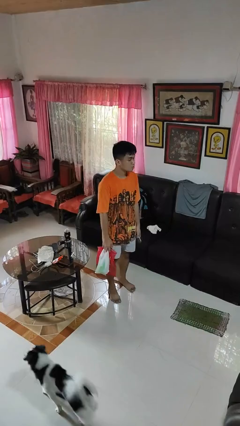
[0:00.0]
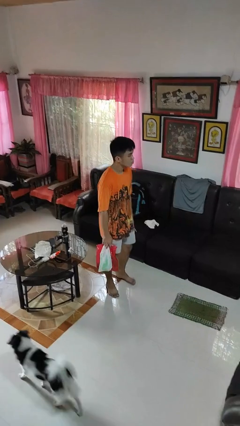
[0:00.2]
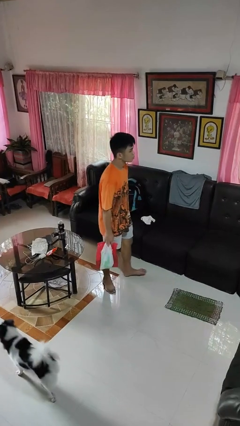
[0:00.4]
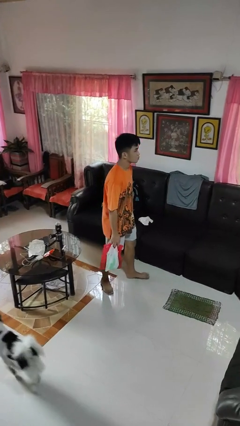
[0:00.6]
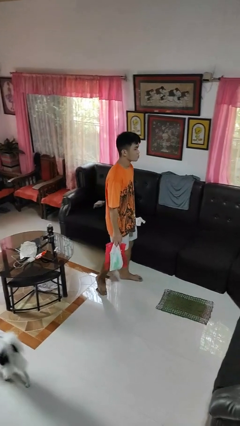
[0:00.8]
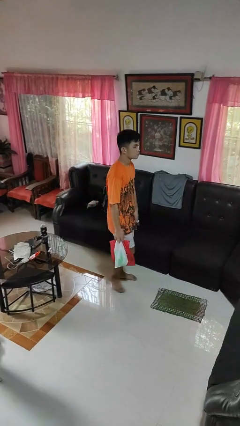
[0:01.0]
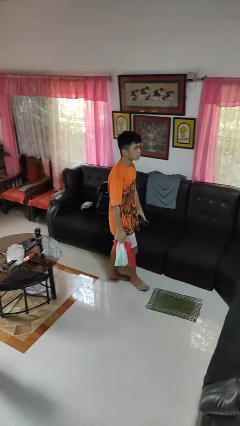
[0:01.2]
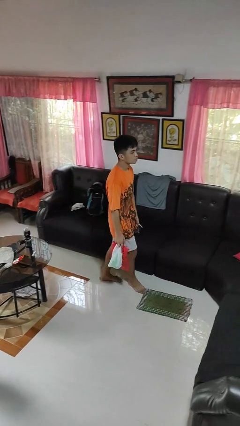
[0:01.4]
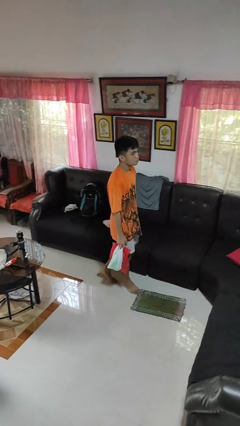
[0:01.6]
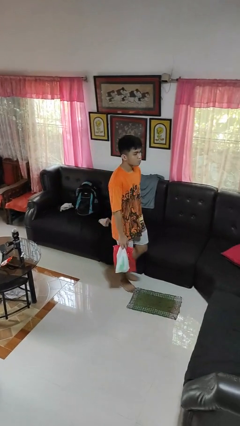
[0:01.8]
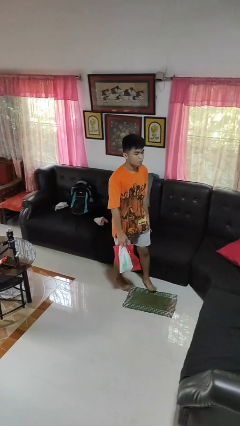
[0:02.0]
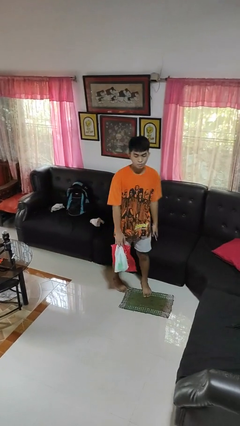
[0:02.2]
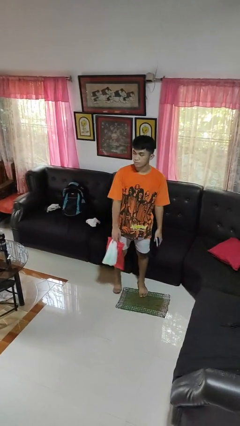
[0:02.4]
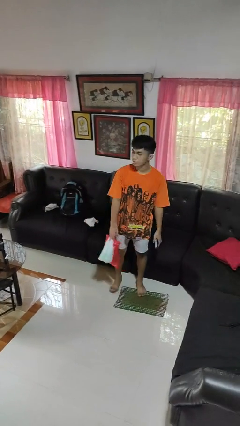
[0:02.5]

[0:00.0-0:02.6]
person carries groceries

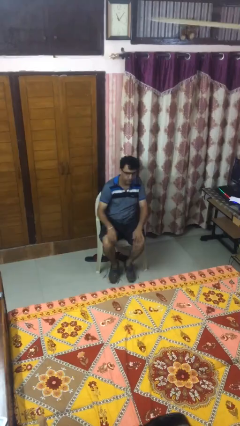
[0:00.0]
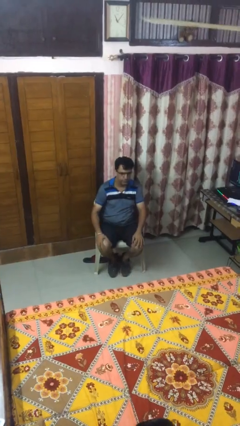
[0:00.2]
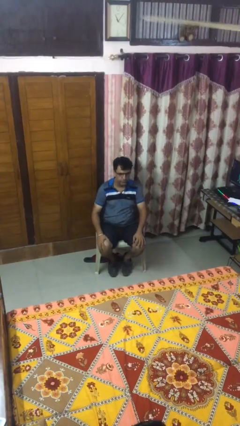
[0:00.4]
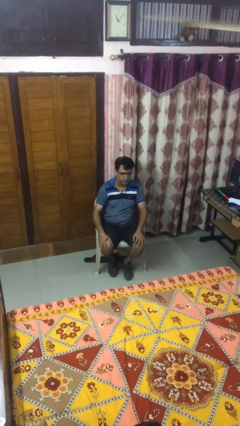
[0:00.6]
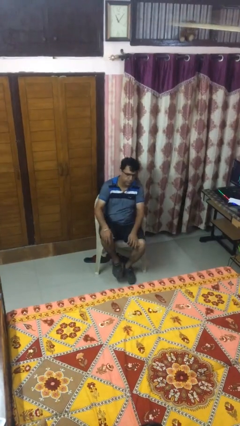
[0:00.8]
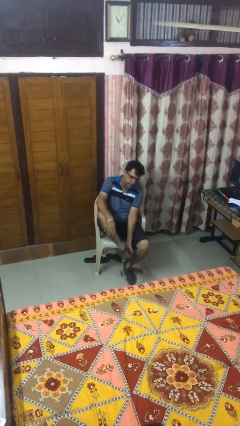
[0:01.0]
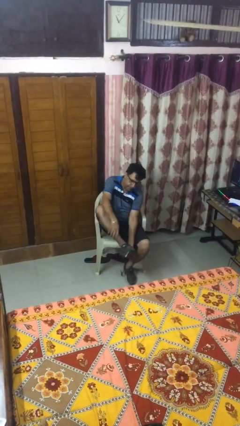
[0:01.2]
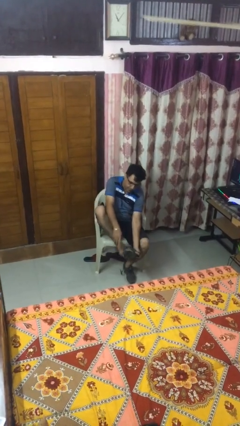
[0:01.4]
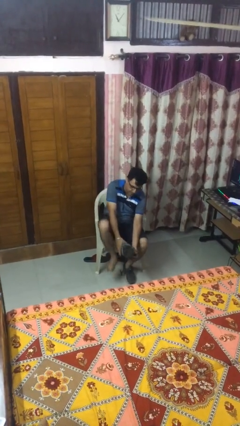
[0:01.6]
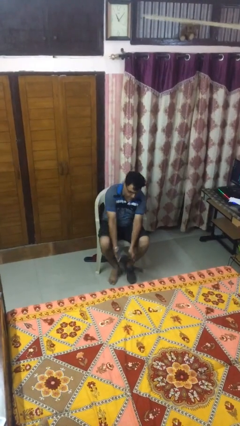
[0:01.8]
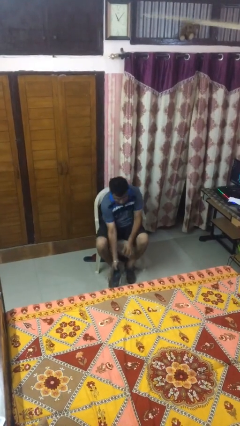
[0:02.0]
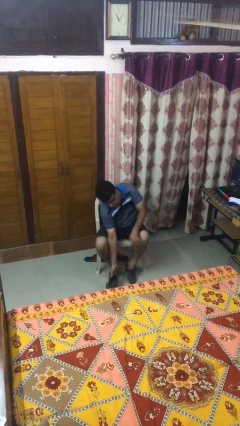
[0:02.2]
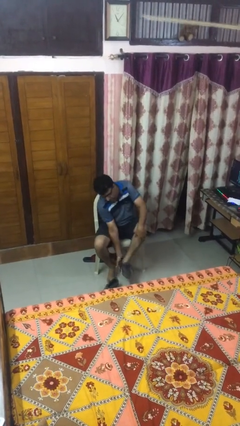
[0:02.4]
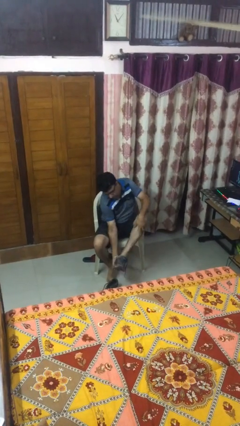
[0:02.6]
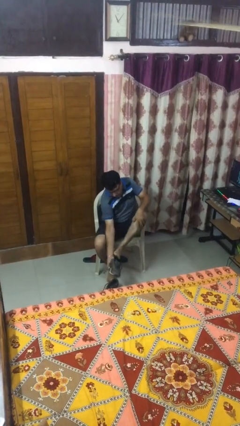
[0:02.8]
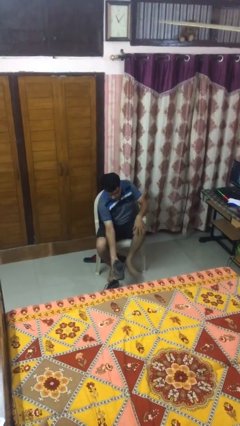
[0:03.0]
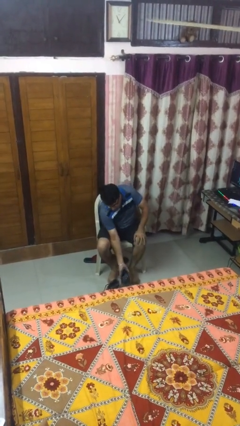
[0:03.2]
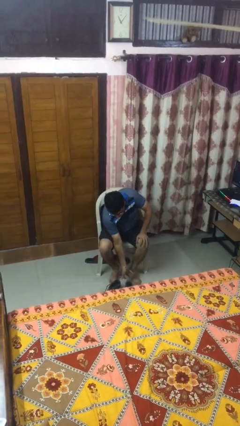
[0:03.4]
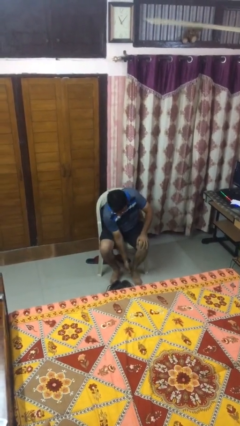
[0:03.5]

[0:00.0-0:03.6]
person takes off shoes

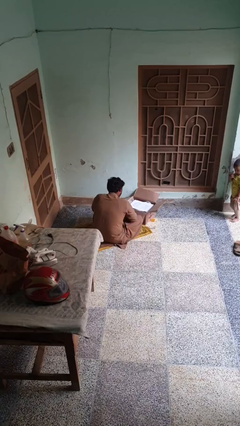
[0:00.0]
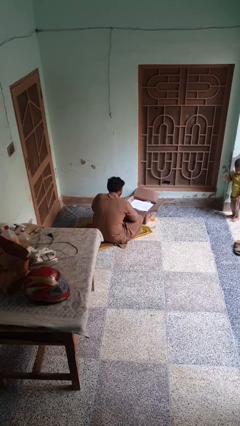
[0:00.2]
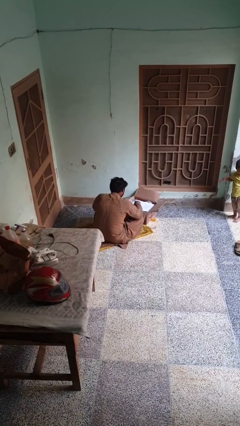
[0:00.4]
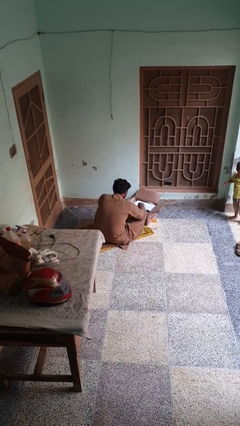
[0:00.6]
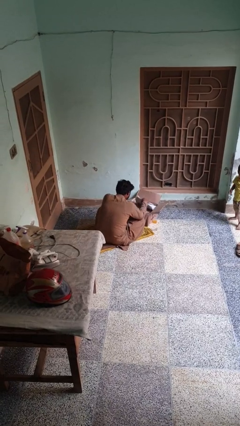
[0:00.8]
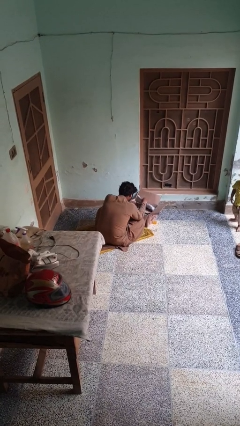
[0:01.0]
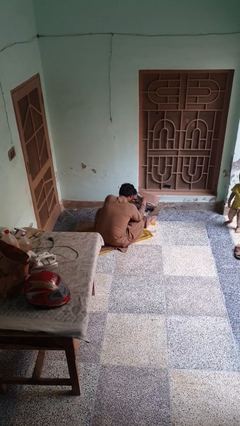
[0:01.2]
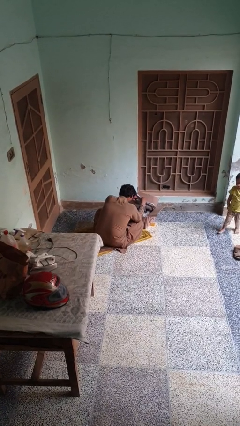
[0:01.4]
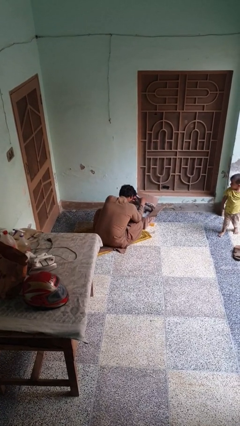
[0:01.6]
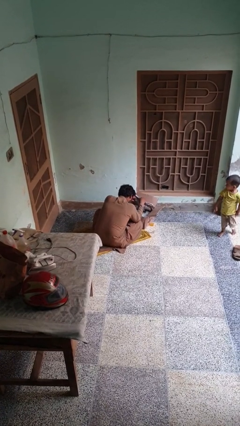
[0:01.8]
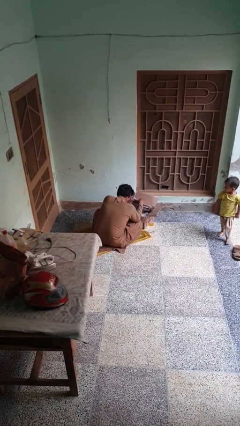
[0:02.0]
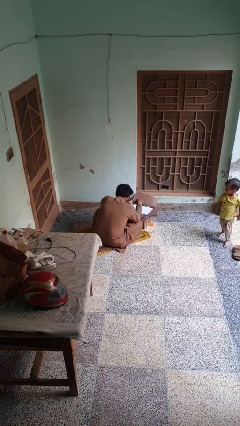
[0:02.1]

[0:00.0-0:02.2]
person searches in box

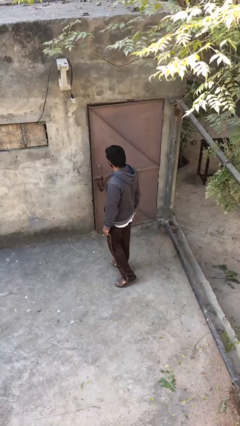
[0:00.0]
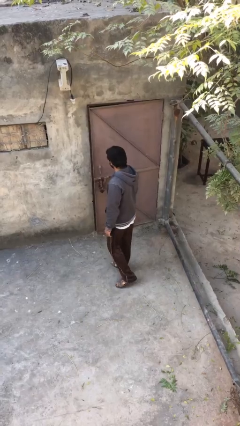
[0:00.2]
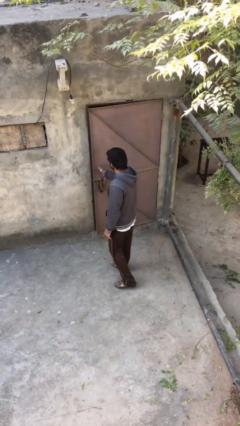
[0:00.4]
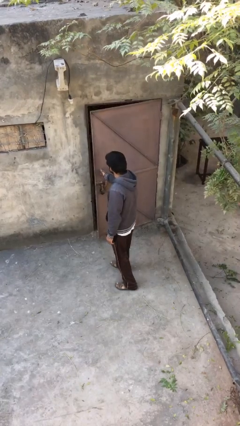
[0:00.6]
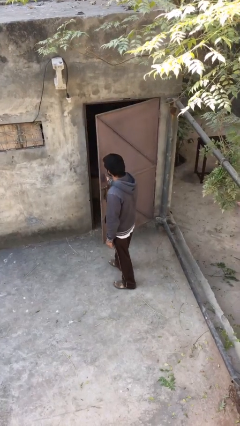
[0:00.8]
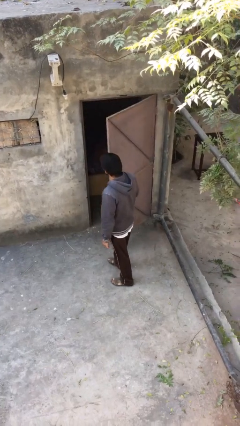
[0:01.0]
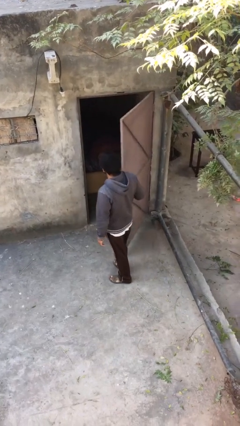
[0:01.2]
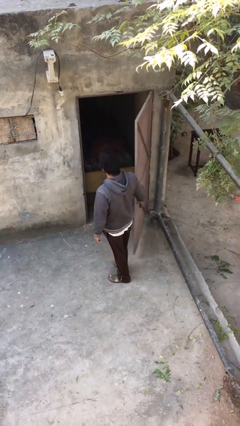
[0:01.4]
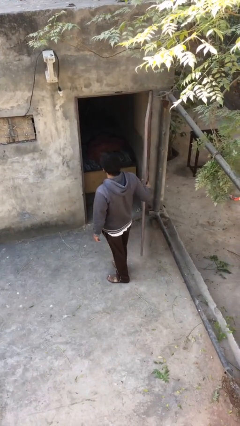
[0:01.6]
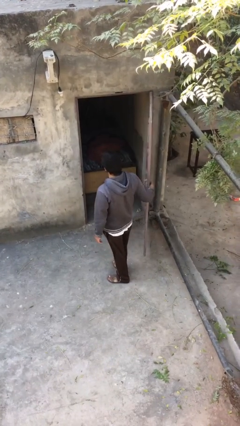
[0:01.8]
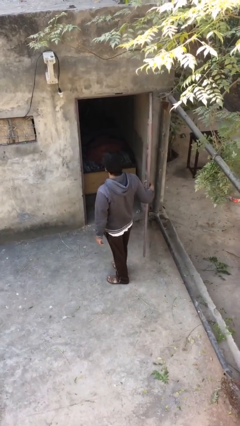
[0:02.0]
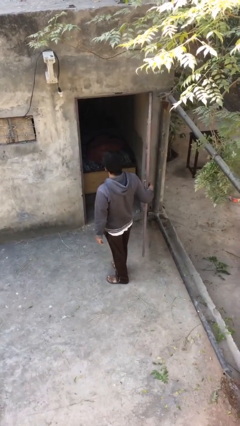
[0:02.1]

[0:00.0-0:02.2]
person opens facility door

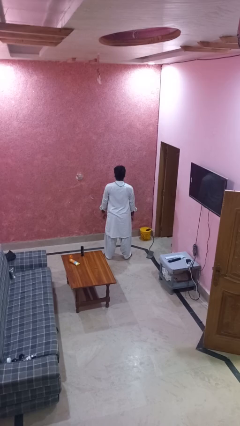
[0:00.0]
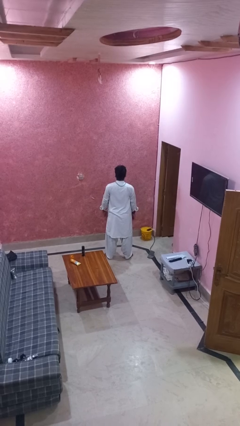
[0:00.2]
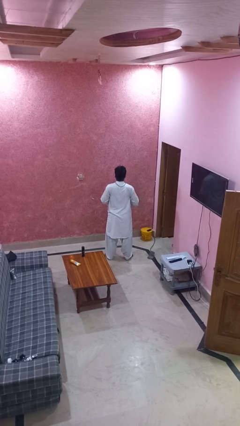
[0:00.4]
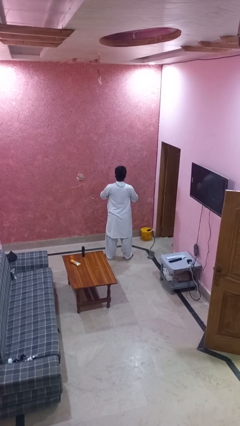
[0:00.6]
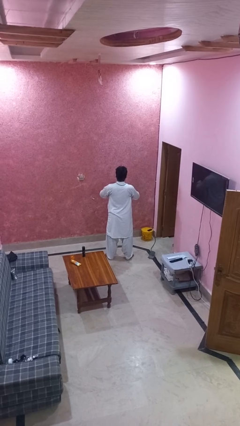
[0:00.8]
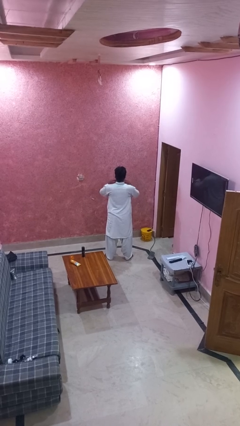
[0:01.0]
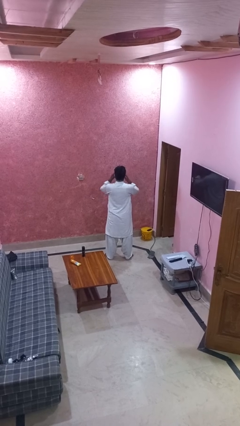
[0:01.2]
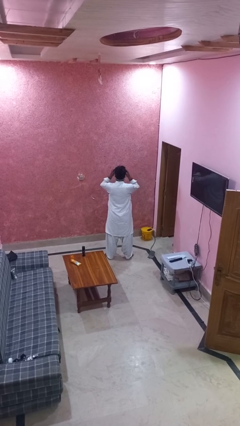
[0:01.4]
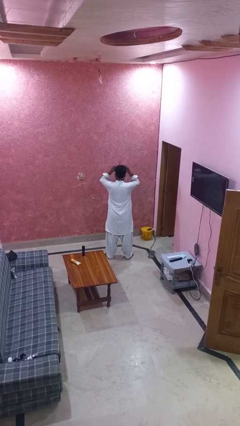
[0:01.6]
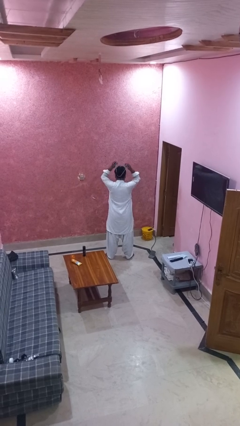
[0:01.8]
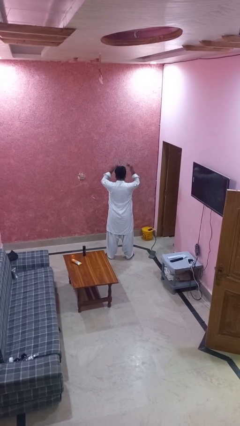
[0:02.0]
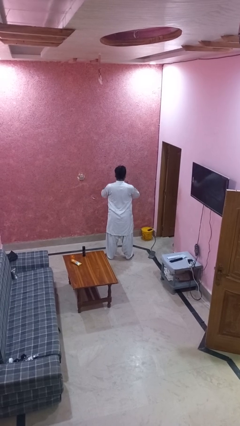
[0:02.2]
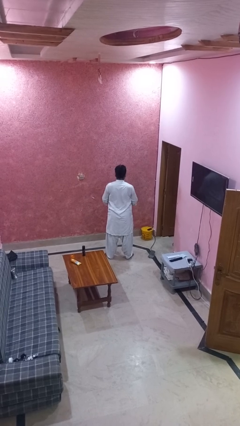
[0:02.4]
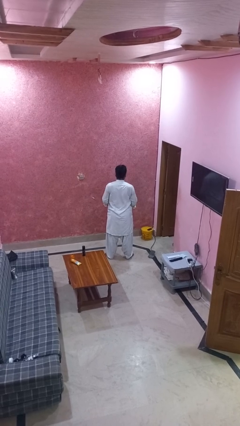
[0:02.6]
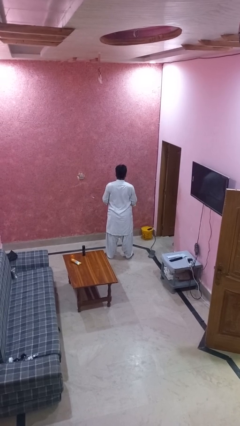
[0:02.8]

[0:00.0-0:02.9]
person takes off necklace

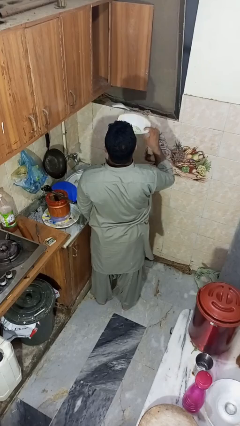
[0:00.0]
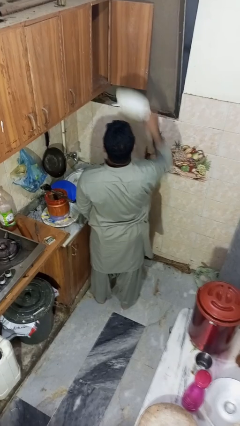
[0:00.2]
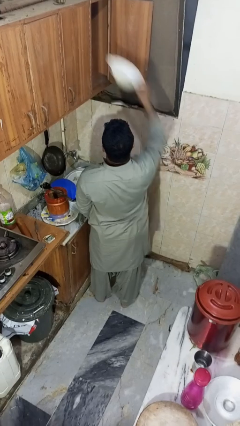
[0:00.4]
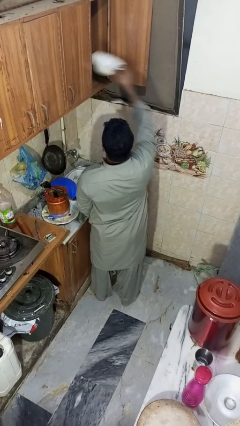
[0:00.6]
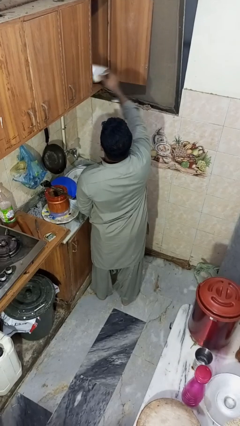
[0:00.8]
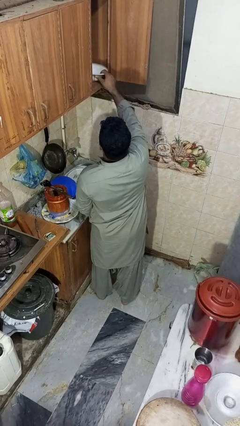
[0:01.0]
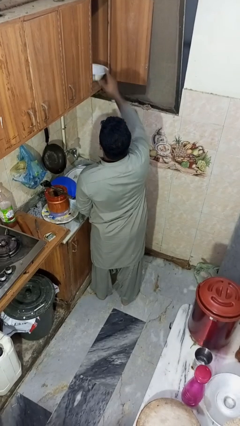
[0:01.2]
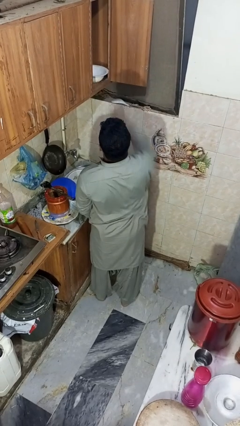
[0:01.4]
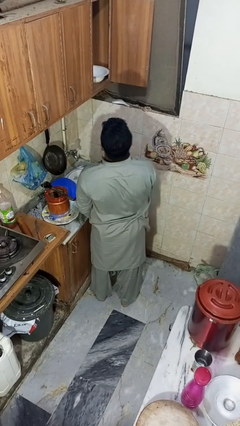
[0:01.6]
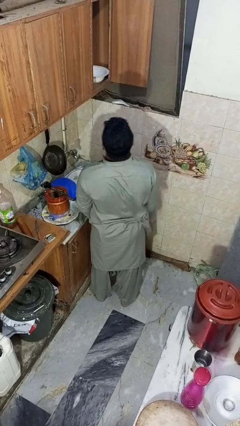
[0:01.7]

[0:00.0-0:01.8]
person puts object in cabinet

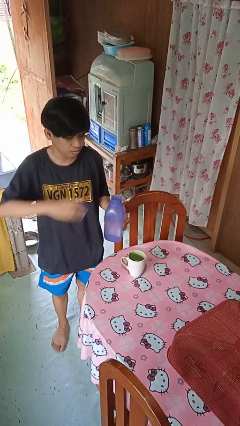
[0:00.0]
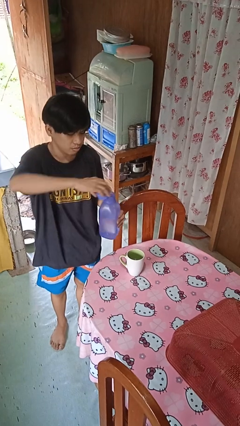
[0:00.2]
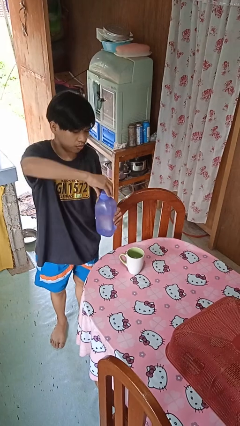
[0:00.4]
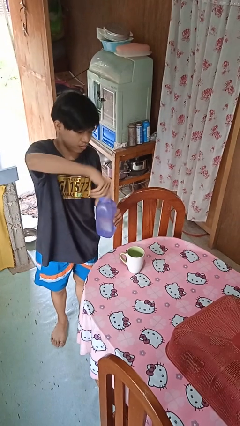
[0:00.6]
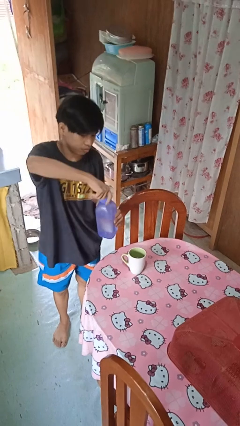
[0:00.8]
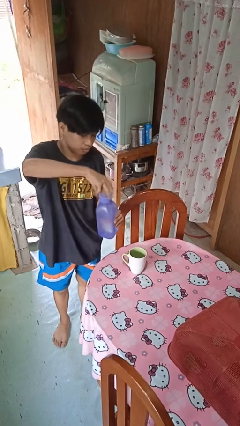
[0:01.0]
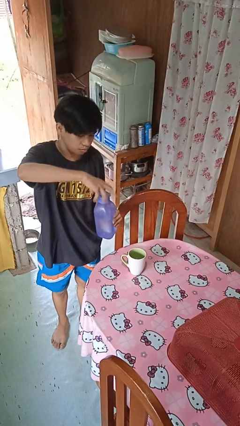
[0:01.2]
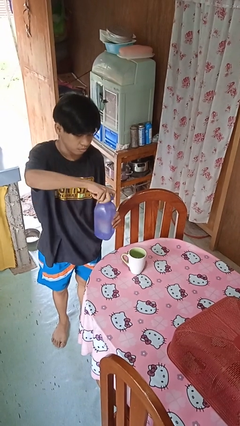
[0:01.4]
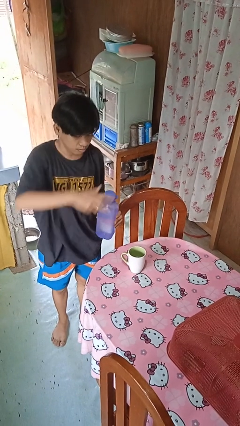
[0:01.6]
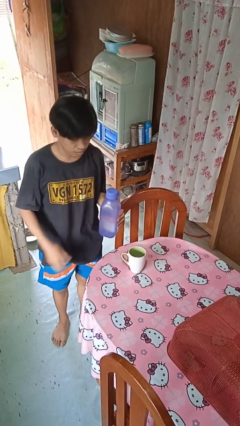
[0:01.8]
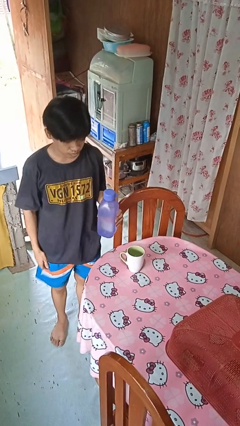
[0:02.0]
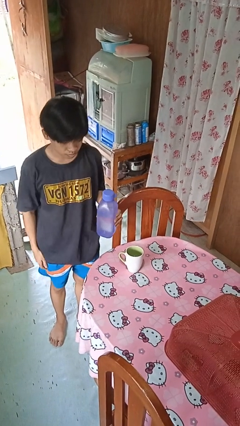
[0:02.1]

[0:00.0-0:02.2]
person screws lid to bottle
